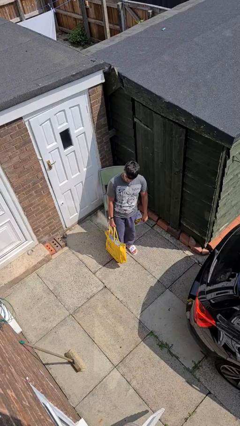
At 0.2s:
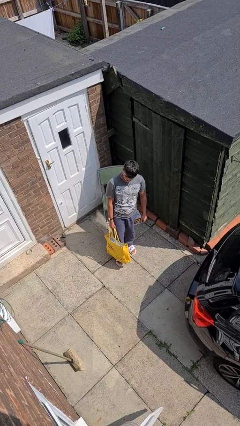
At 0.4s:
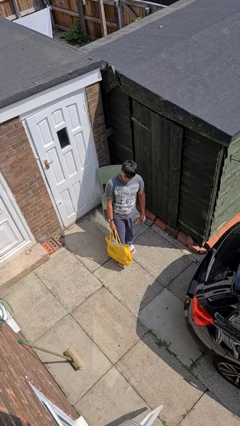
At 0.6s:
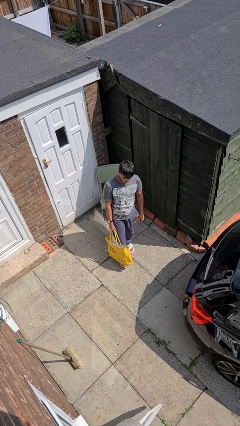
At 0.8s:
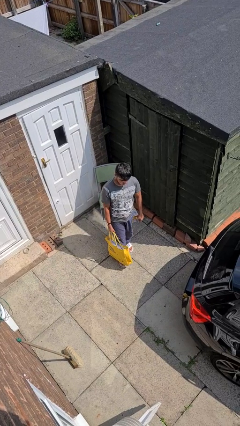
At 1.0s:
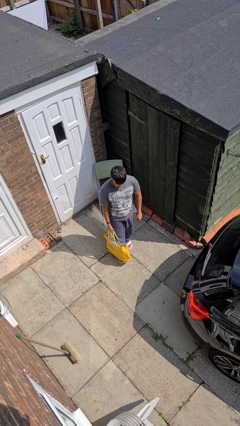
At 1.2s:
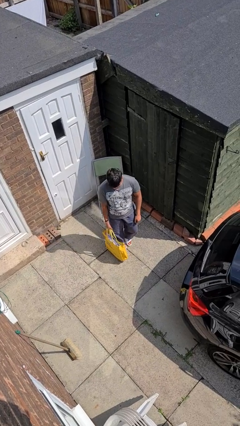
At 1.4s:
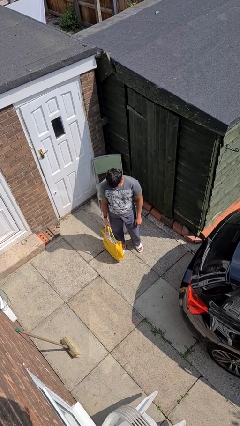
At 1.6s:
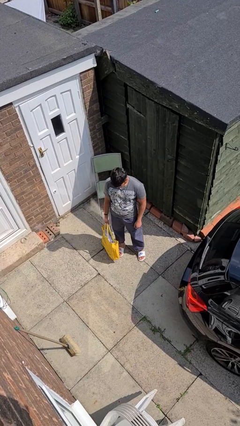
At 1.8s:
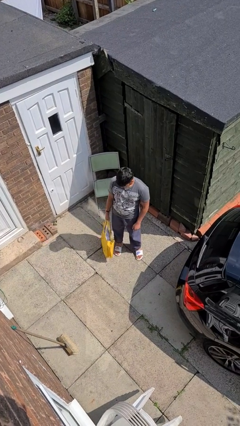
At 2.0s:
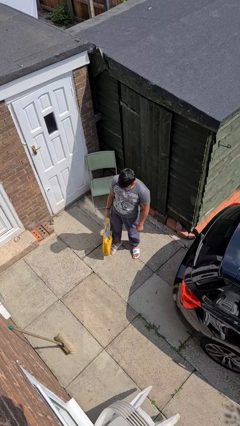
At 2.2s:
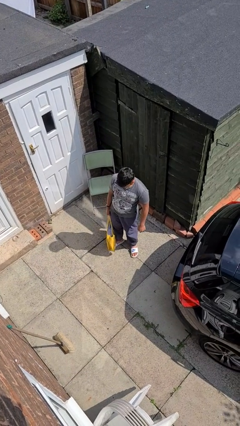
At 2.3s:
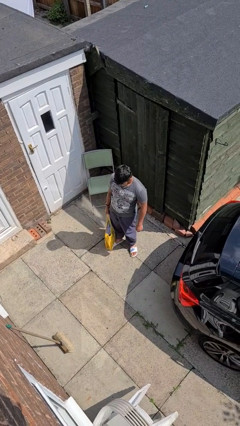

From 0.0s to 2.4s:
person carries groceries

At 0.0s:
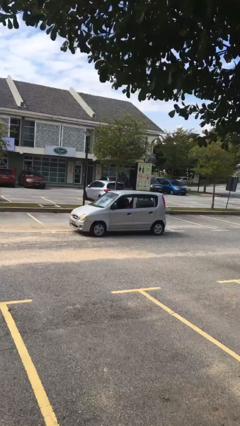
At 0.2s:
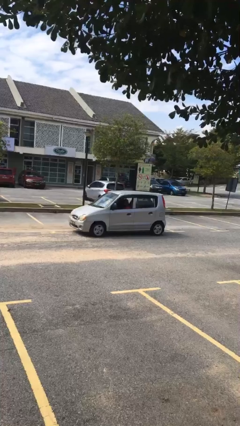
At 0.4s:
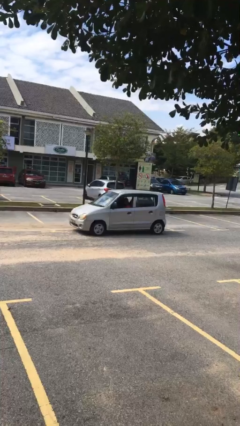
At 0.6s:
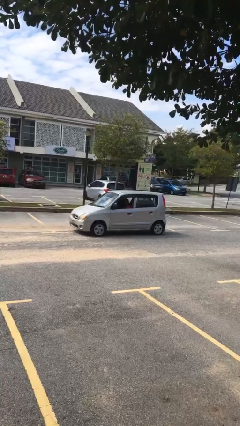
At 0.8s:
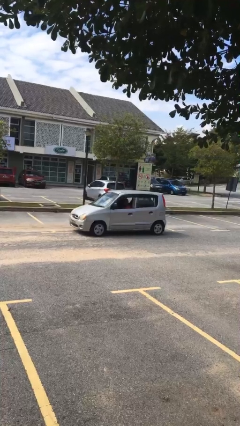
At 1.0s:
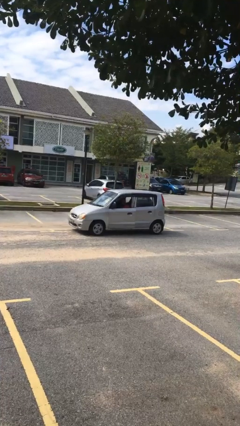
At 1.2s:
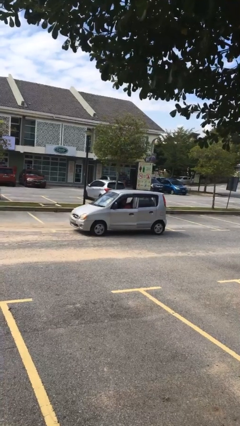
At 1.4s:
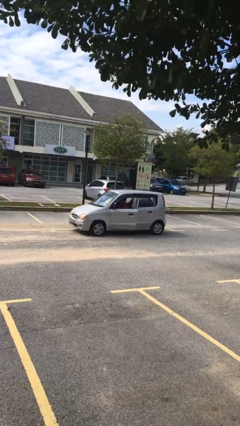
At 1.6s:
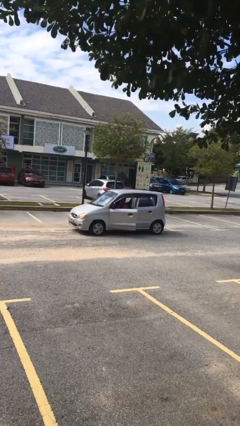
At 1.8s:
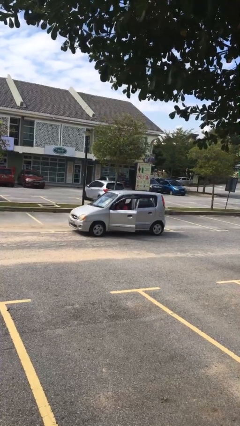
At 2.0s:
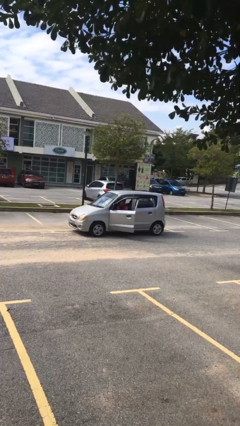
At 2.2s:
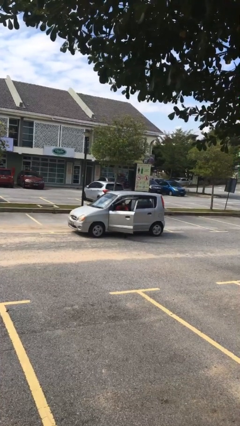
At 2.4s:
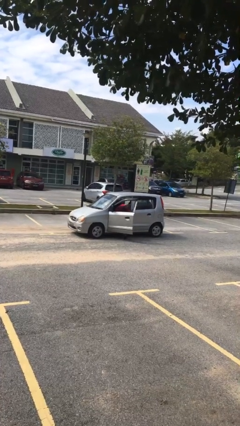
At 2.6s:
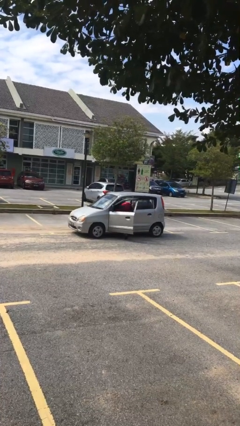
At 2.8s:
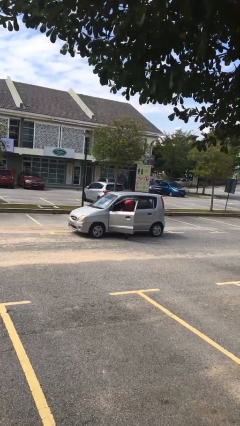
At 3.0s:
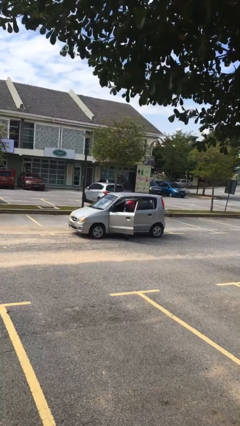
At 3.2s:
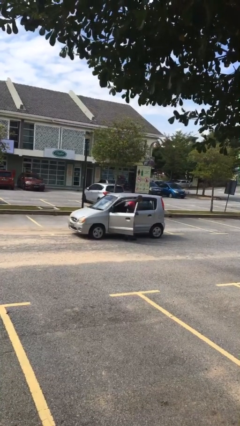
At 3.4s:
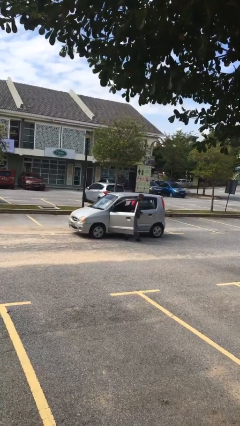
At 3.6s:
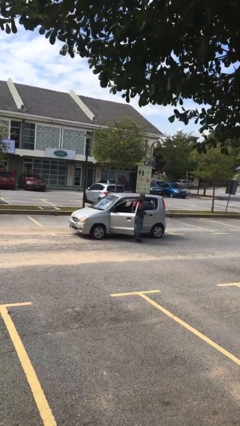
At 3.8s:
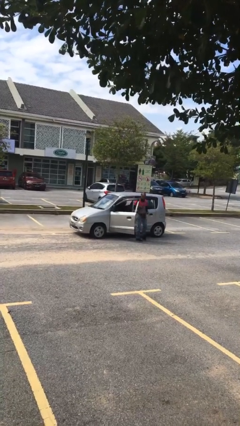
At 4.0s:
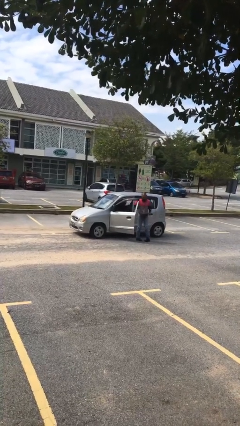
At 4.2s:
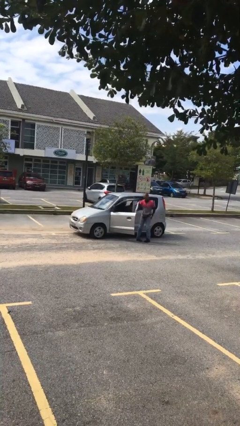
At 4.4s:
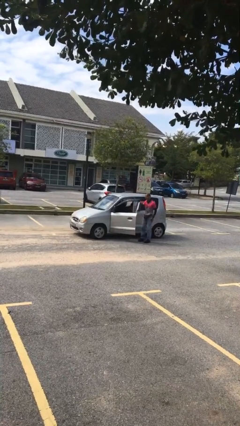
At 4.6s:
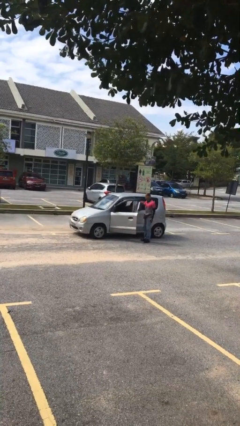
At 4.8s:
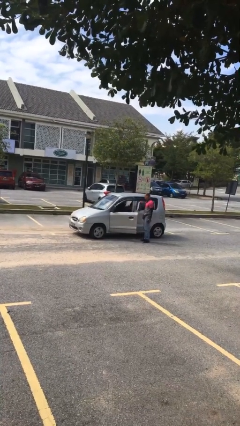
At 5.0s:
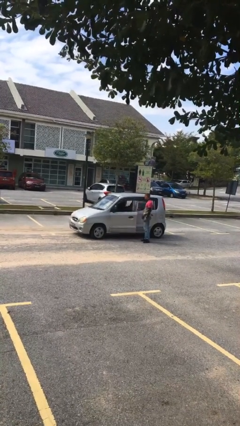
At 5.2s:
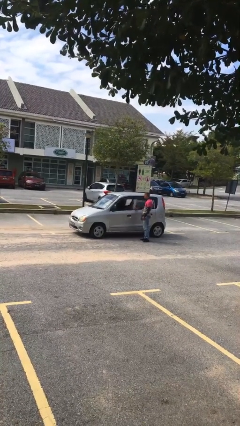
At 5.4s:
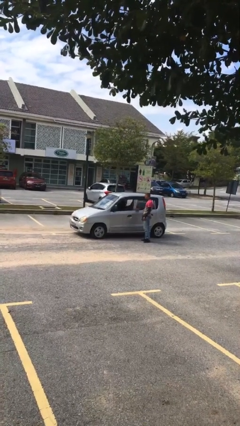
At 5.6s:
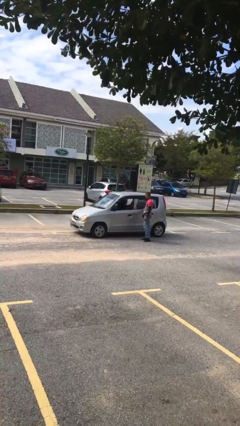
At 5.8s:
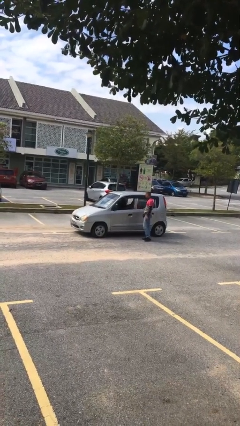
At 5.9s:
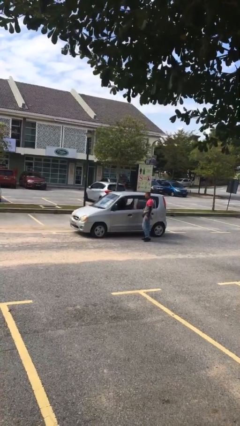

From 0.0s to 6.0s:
car drops off person

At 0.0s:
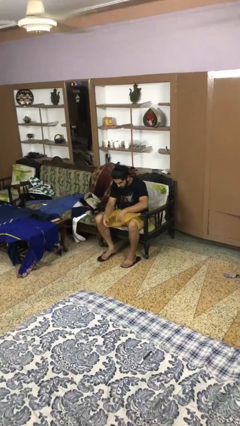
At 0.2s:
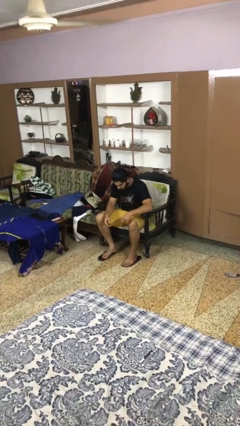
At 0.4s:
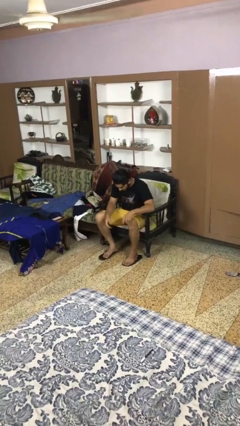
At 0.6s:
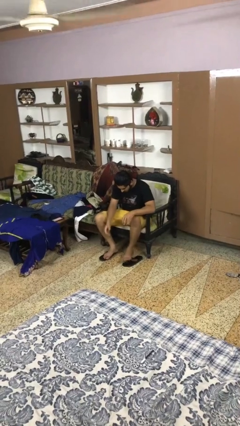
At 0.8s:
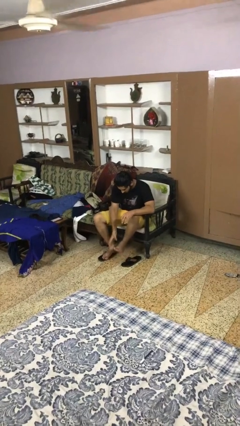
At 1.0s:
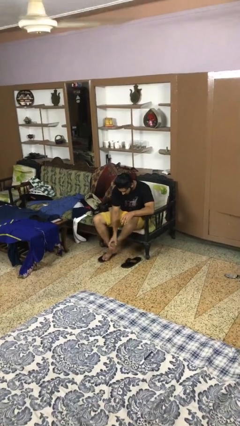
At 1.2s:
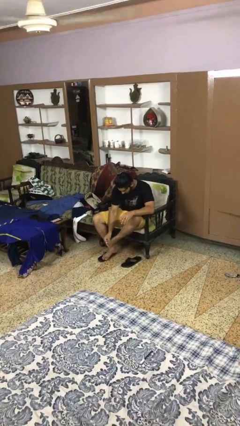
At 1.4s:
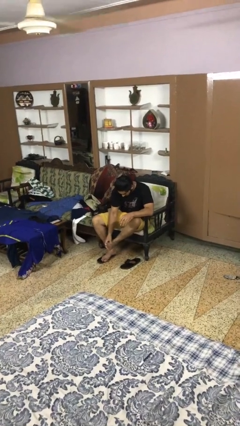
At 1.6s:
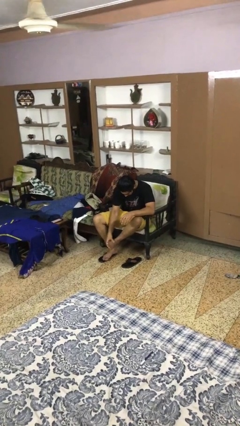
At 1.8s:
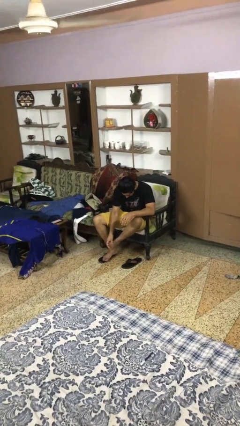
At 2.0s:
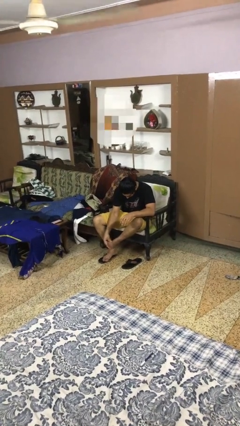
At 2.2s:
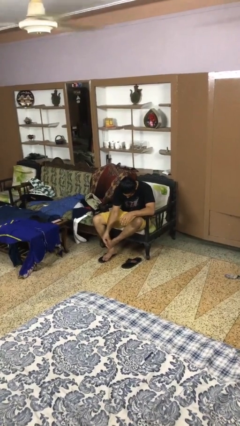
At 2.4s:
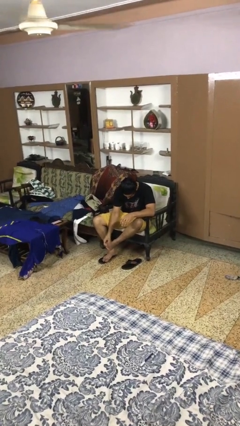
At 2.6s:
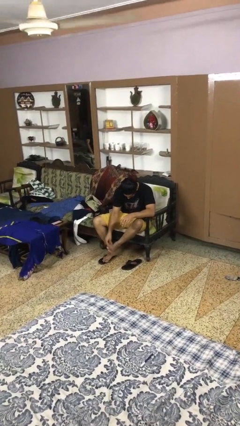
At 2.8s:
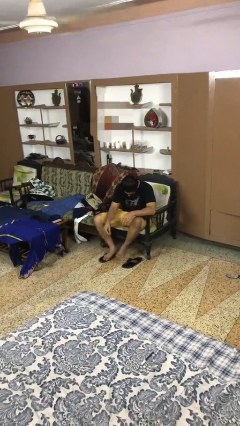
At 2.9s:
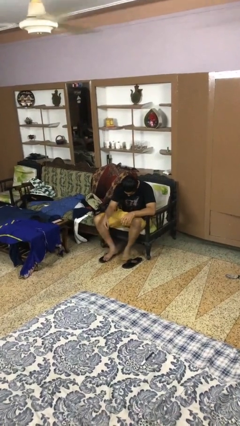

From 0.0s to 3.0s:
person rubs foot

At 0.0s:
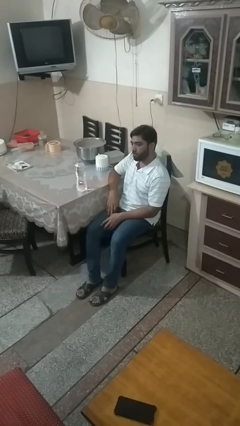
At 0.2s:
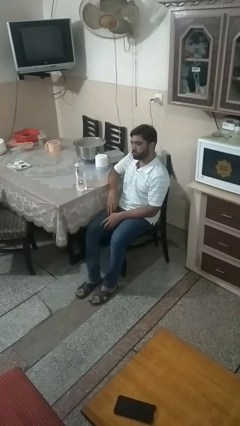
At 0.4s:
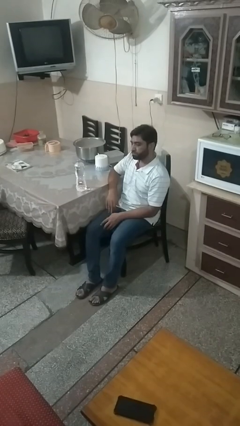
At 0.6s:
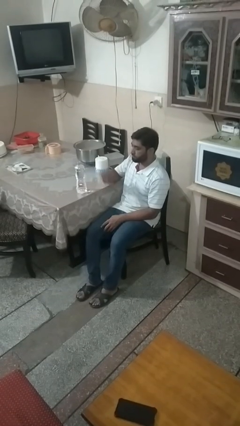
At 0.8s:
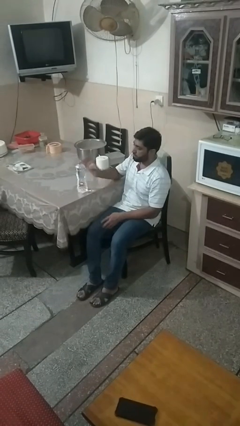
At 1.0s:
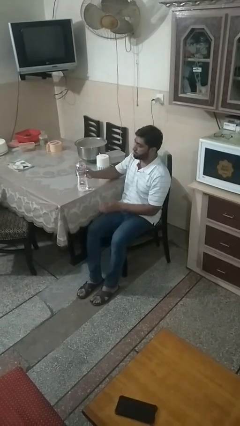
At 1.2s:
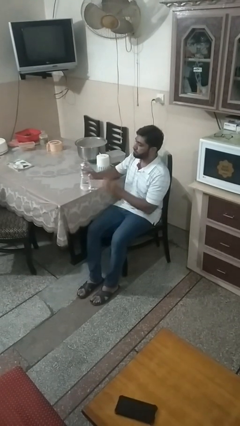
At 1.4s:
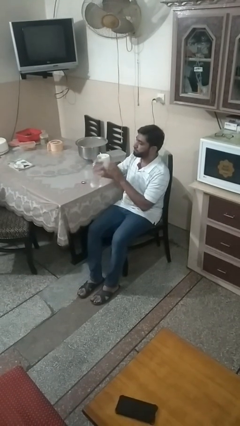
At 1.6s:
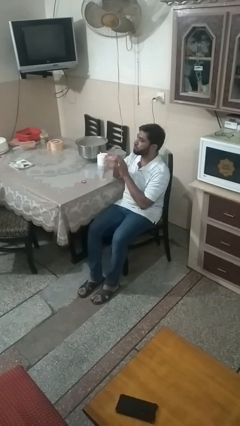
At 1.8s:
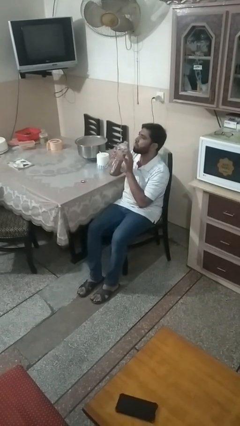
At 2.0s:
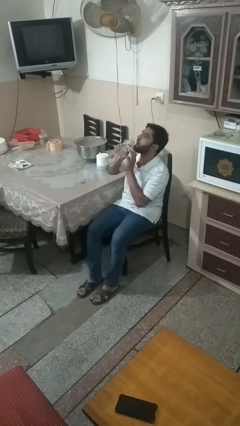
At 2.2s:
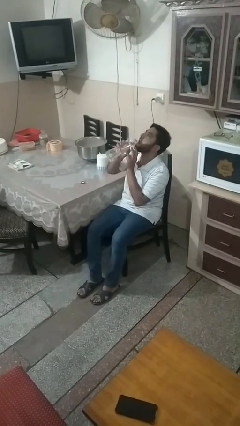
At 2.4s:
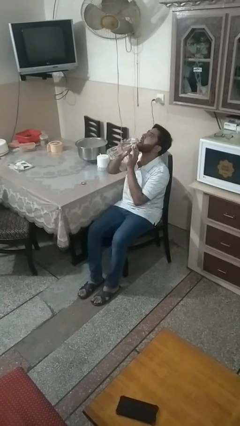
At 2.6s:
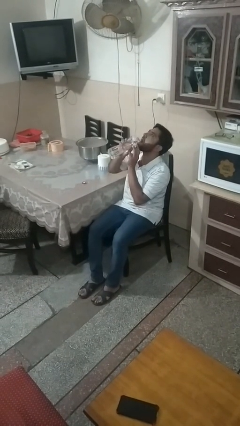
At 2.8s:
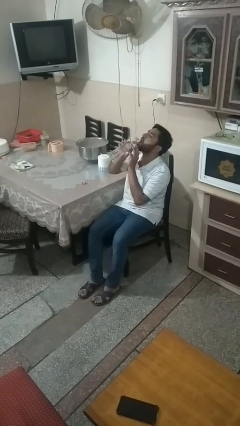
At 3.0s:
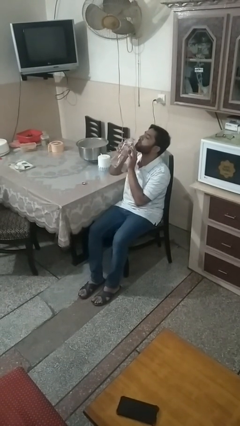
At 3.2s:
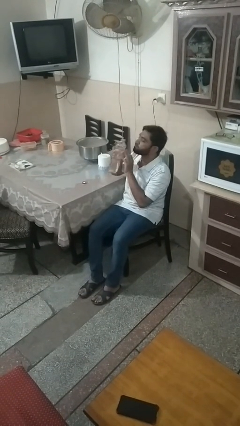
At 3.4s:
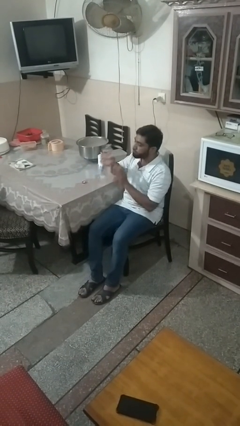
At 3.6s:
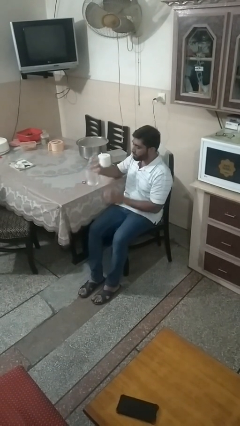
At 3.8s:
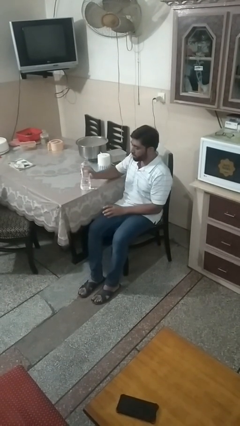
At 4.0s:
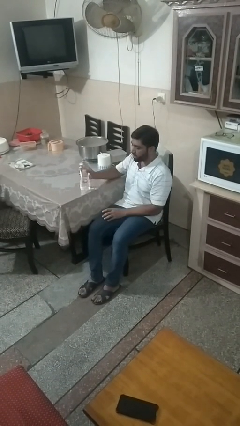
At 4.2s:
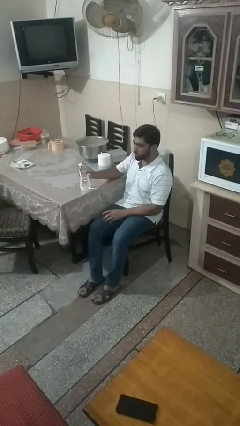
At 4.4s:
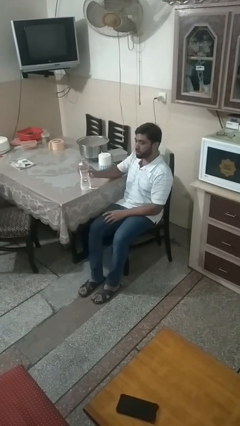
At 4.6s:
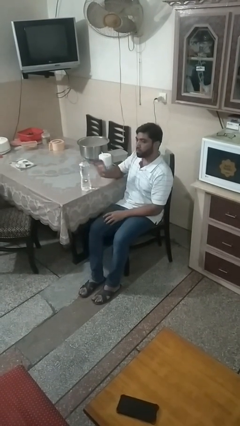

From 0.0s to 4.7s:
person drinks from bottle

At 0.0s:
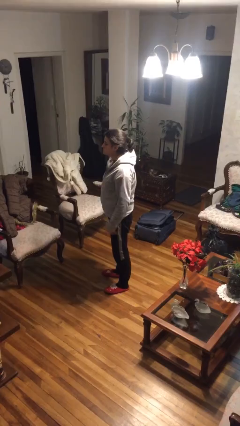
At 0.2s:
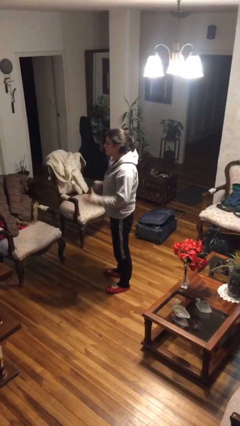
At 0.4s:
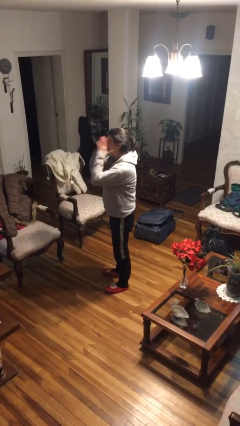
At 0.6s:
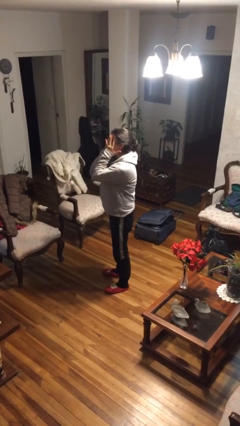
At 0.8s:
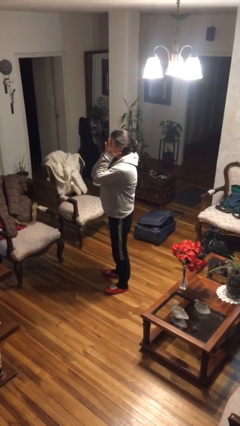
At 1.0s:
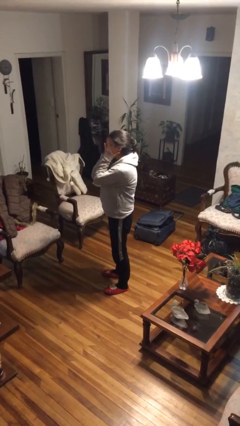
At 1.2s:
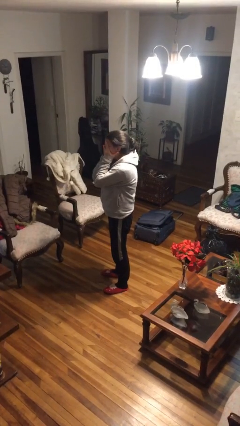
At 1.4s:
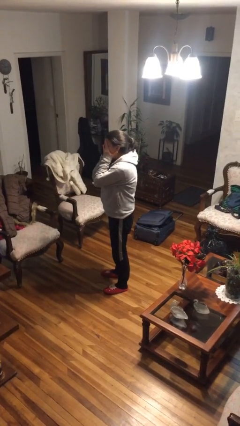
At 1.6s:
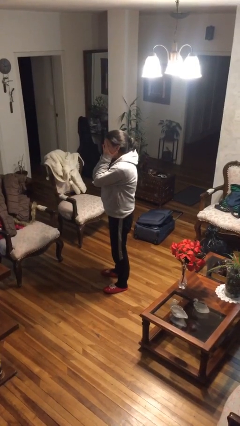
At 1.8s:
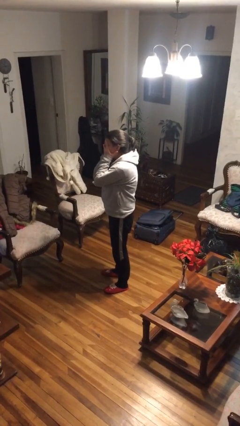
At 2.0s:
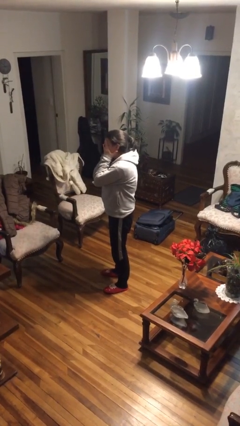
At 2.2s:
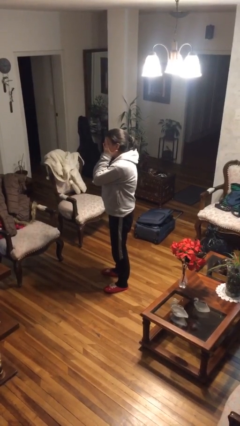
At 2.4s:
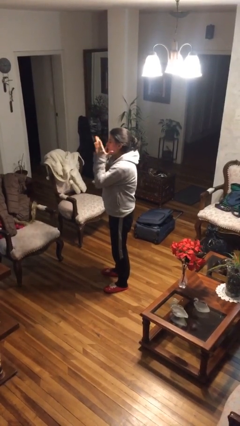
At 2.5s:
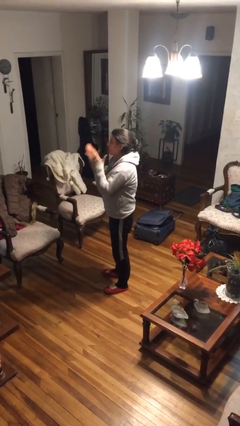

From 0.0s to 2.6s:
person covers face with hands
